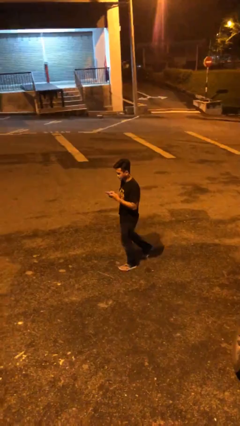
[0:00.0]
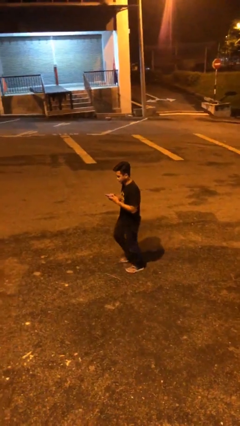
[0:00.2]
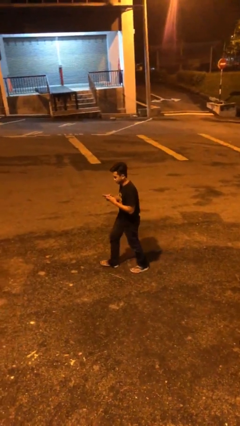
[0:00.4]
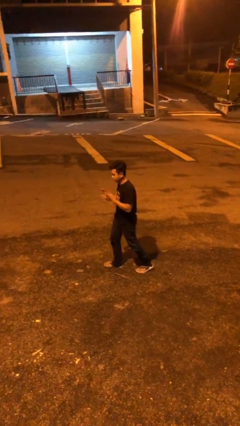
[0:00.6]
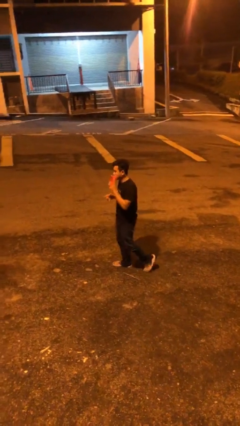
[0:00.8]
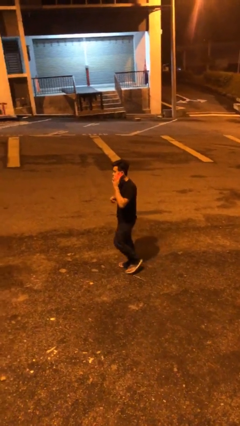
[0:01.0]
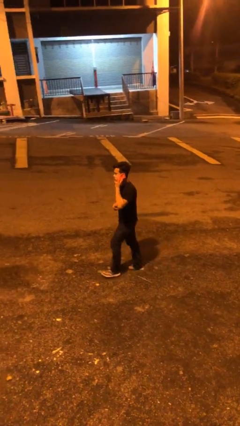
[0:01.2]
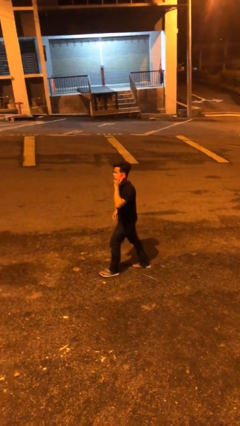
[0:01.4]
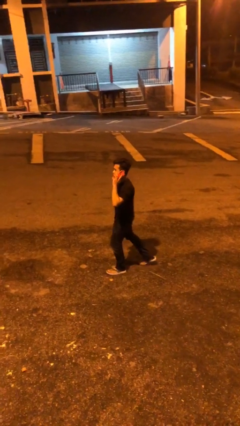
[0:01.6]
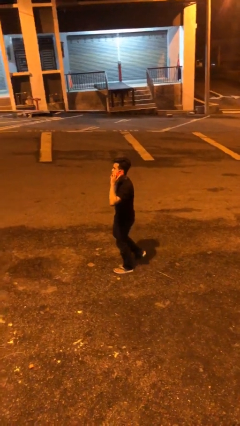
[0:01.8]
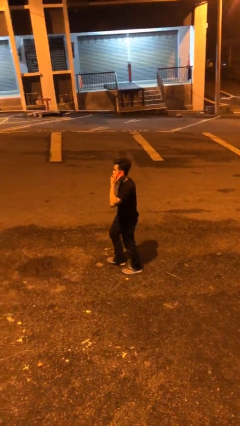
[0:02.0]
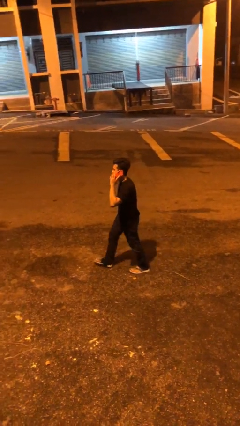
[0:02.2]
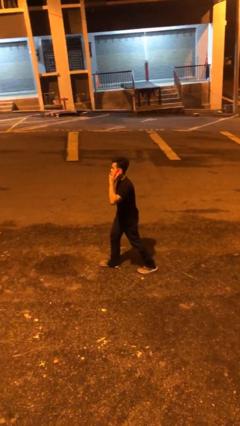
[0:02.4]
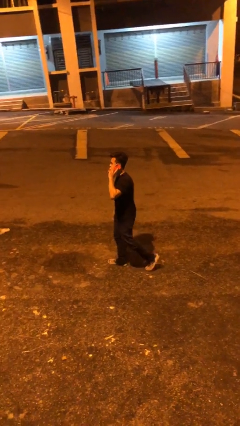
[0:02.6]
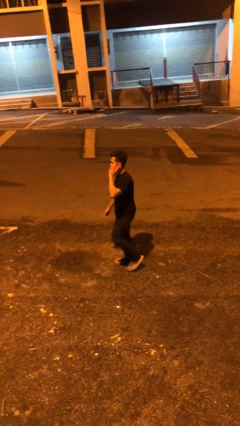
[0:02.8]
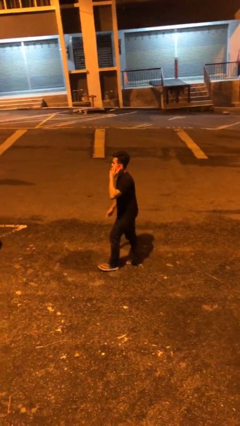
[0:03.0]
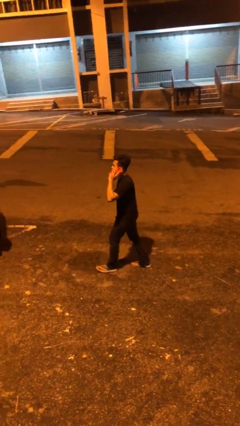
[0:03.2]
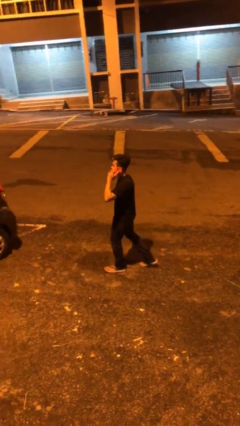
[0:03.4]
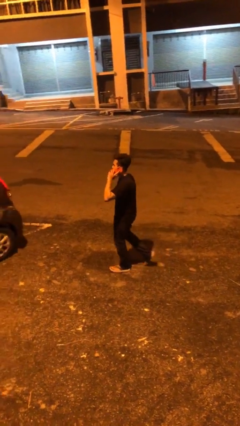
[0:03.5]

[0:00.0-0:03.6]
person talks on phone

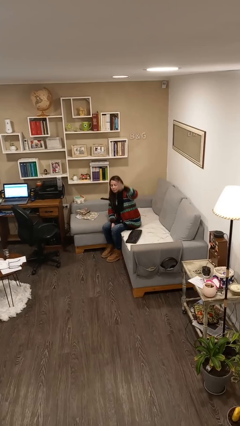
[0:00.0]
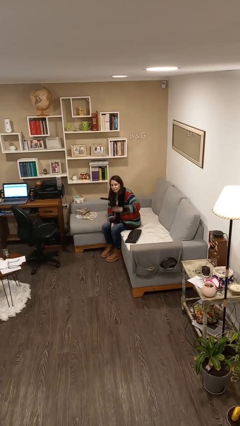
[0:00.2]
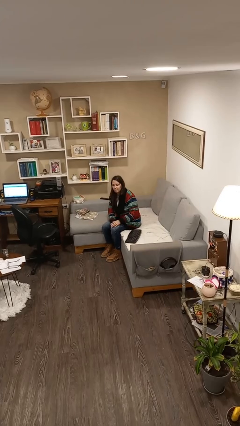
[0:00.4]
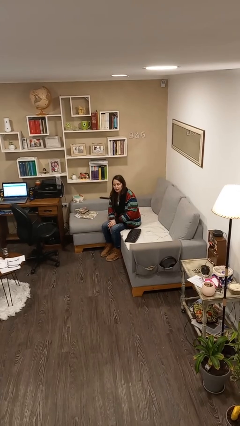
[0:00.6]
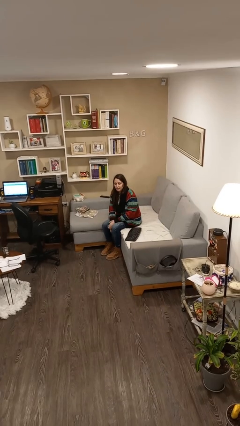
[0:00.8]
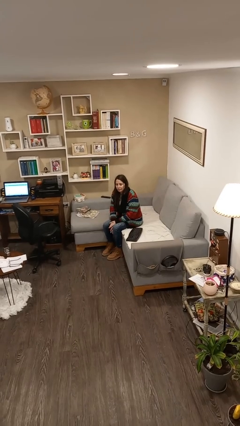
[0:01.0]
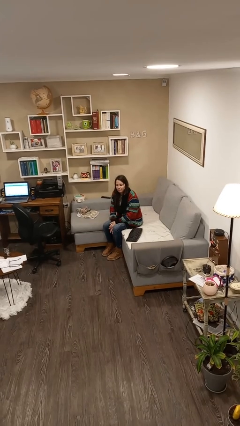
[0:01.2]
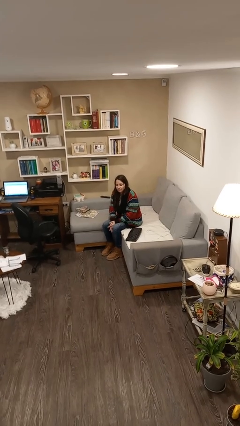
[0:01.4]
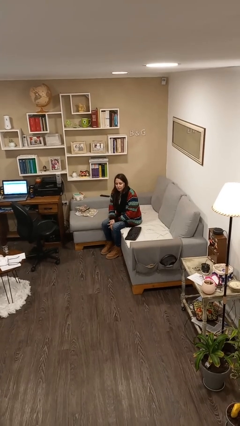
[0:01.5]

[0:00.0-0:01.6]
person gestures lower hand

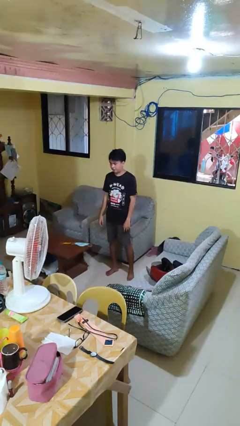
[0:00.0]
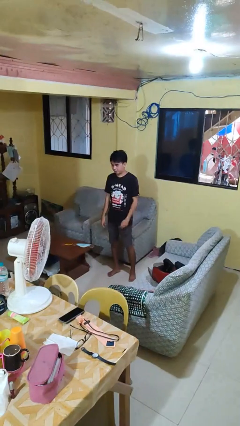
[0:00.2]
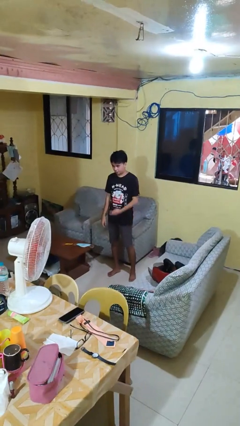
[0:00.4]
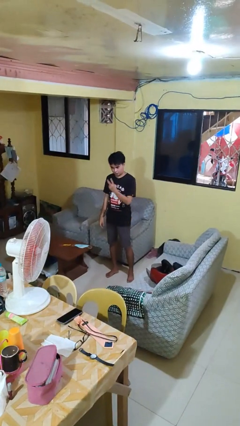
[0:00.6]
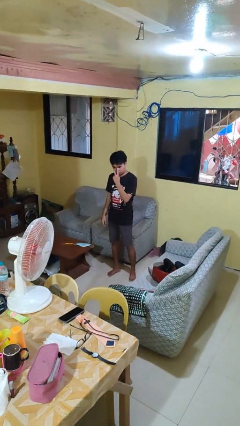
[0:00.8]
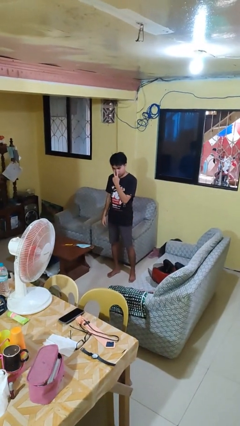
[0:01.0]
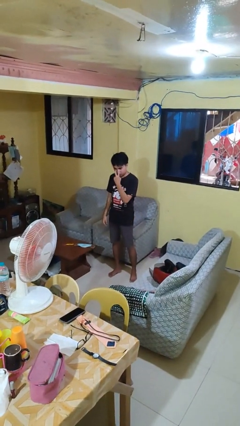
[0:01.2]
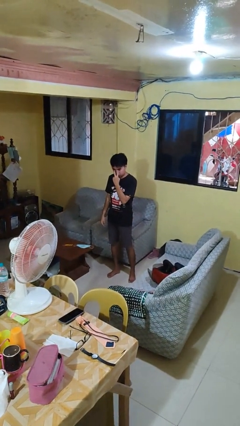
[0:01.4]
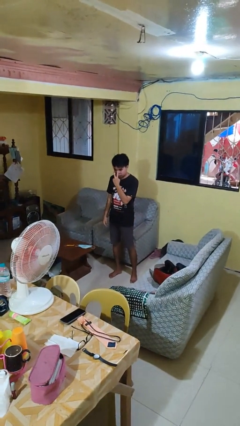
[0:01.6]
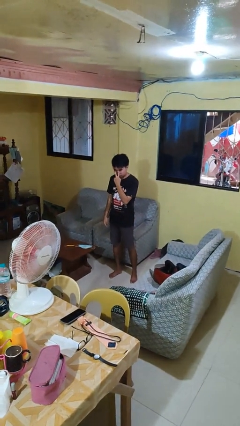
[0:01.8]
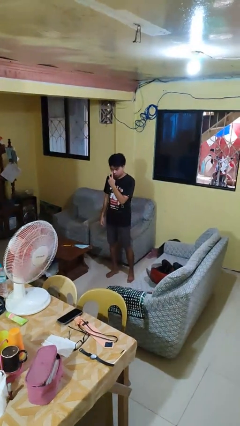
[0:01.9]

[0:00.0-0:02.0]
person gestures watch closely

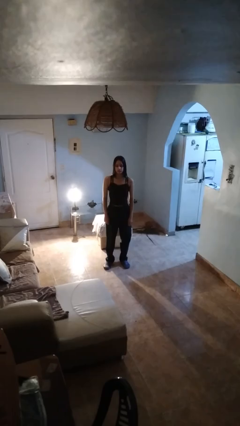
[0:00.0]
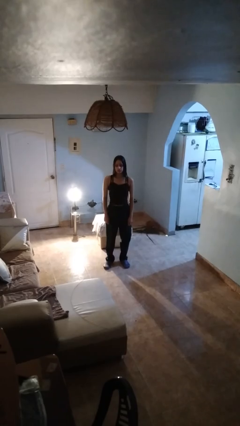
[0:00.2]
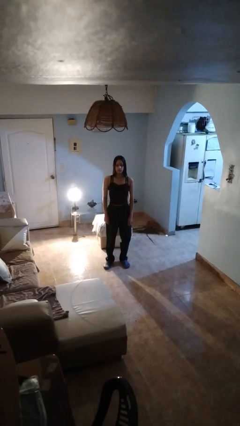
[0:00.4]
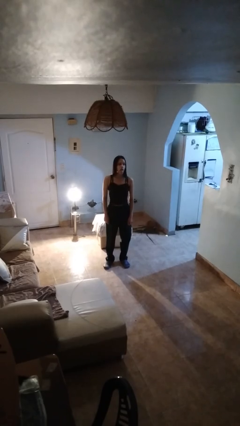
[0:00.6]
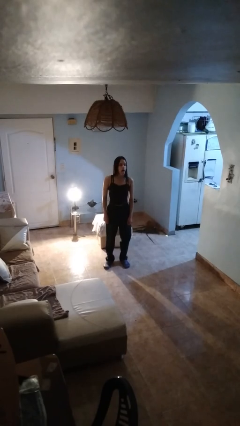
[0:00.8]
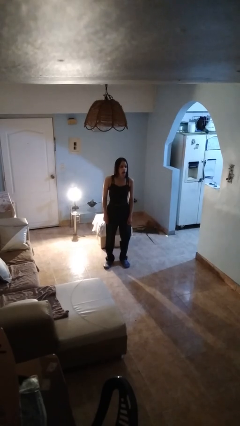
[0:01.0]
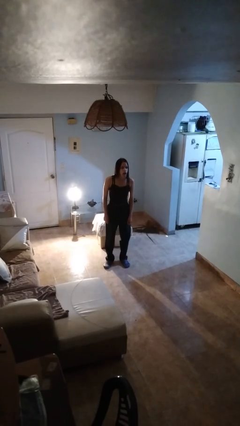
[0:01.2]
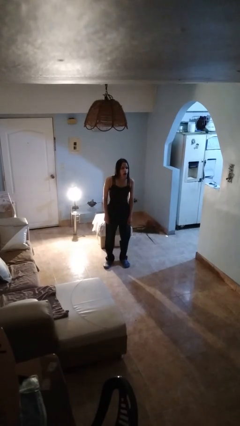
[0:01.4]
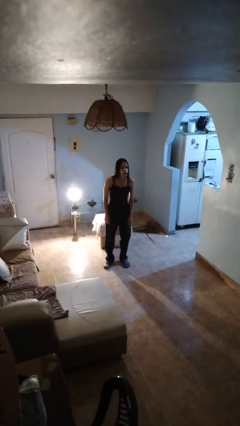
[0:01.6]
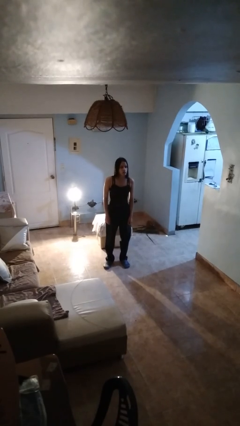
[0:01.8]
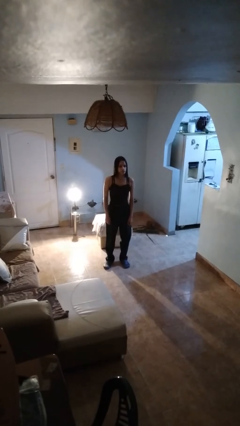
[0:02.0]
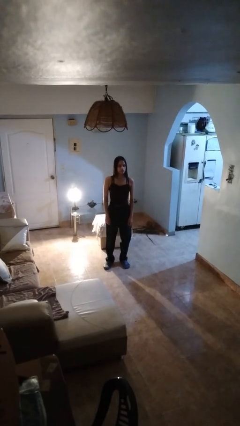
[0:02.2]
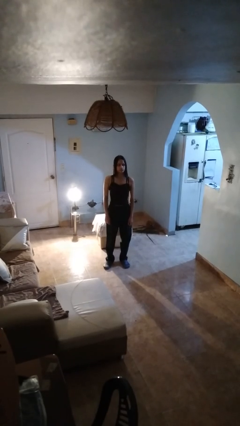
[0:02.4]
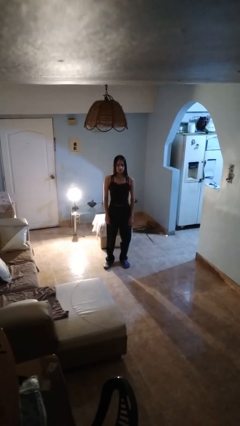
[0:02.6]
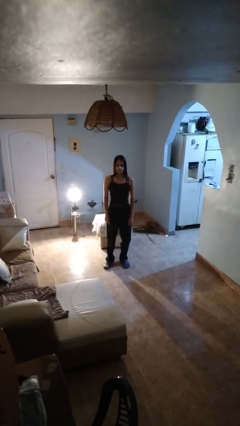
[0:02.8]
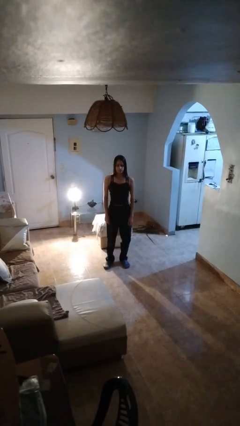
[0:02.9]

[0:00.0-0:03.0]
person sticks out tongue

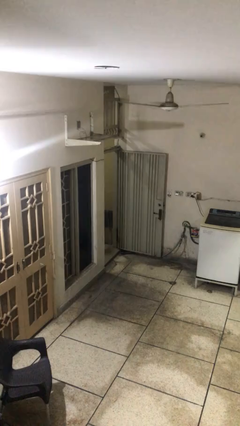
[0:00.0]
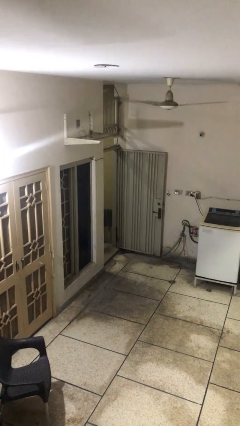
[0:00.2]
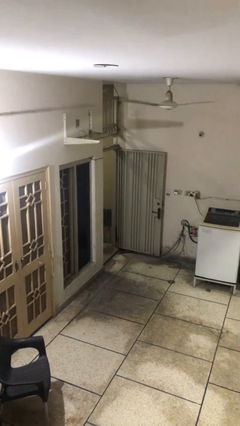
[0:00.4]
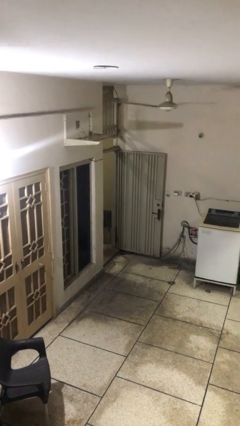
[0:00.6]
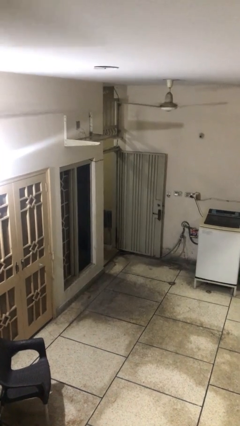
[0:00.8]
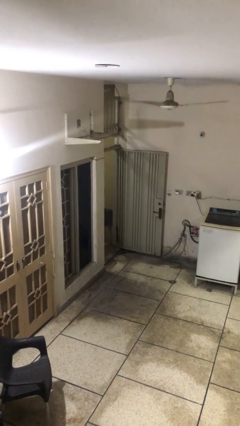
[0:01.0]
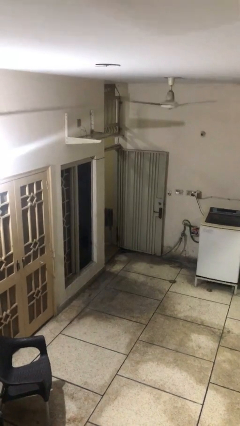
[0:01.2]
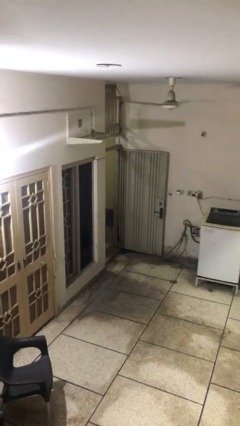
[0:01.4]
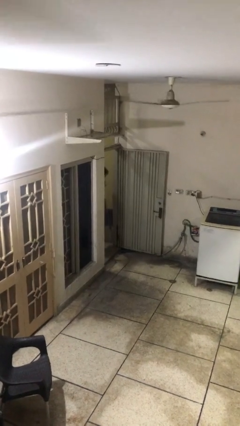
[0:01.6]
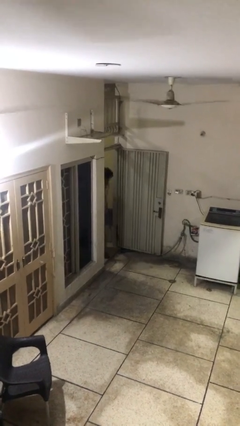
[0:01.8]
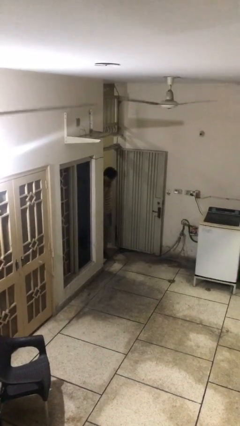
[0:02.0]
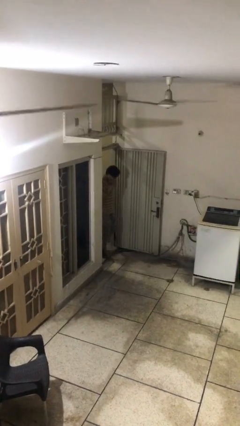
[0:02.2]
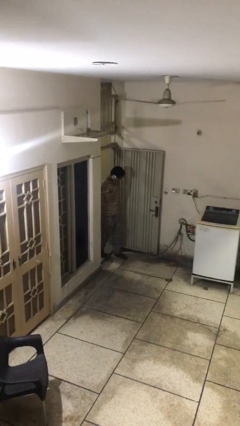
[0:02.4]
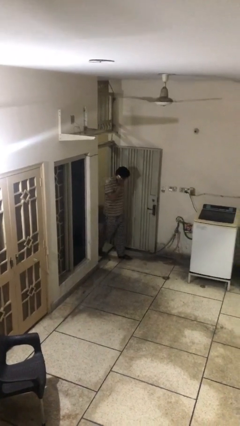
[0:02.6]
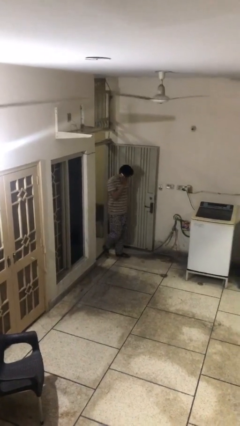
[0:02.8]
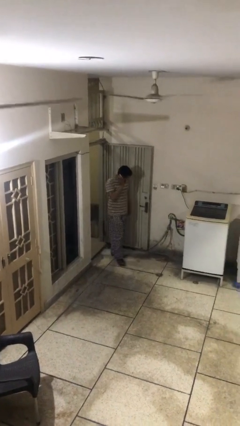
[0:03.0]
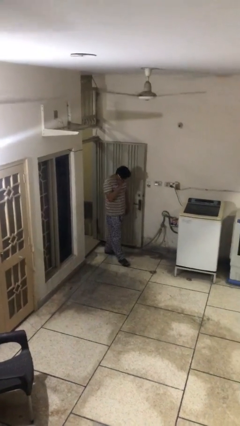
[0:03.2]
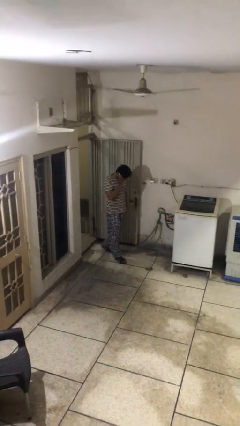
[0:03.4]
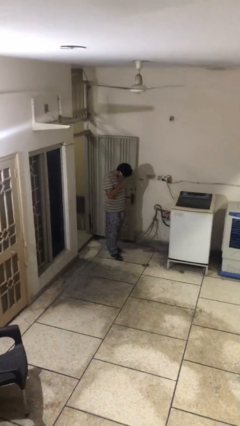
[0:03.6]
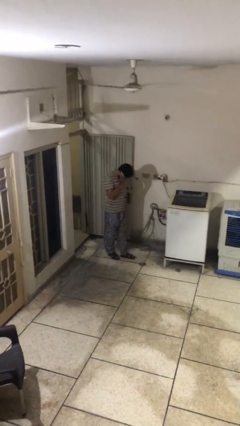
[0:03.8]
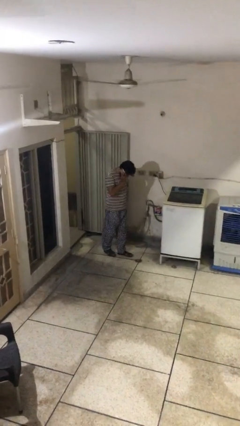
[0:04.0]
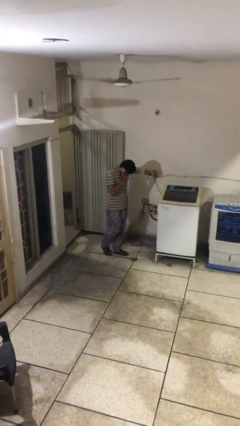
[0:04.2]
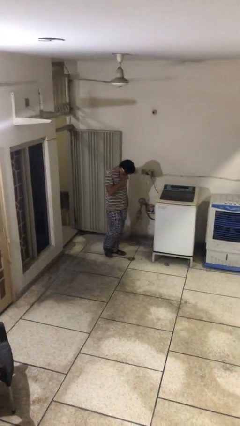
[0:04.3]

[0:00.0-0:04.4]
person enters scene through structure

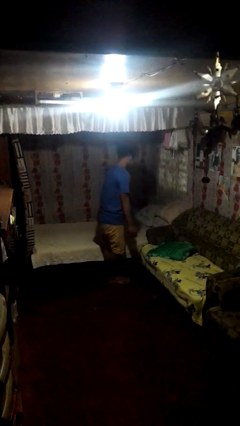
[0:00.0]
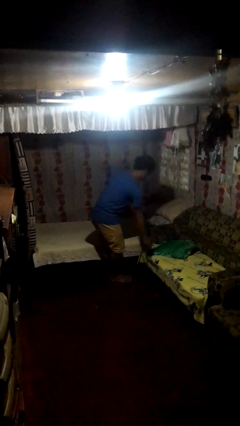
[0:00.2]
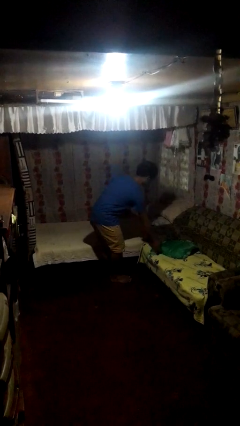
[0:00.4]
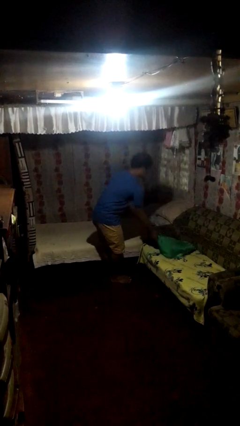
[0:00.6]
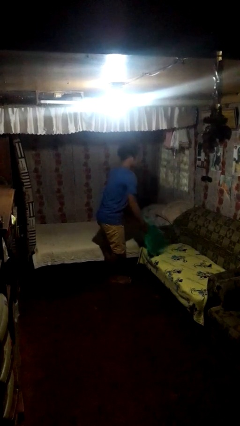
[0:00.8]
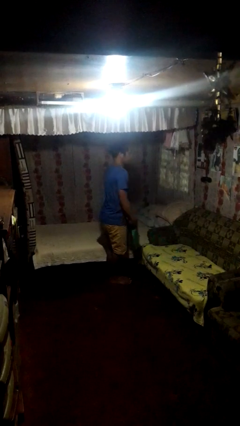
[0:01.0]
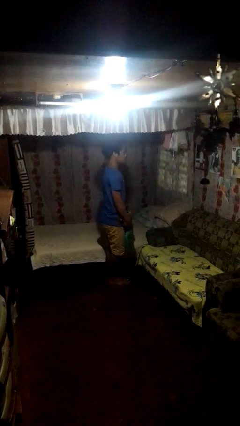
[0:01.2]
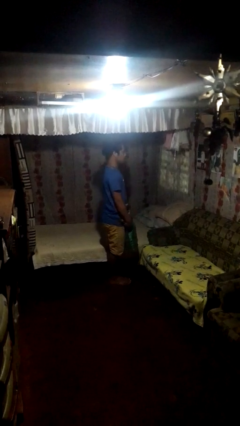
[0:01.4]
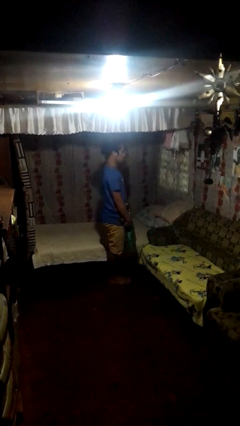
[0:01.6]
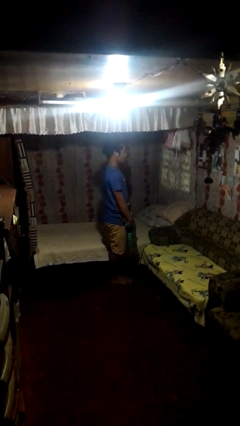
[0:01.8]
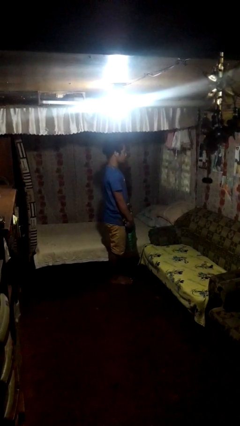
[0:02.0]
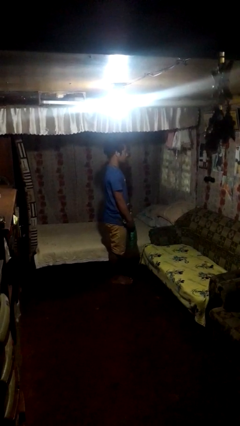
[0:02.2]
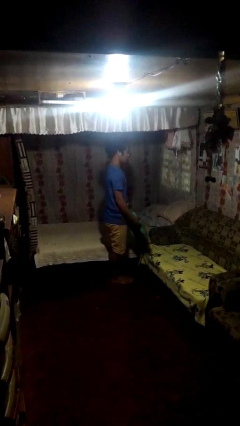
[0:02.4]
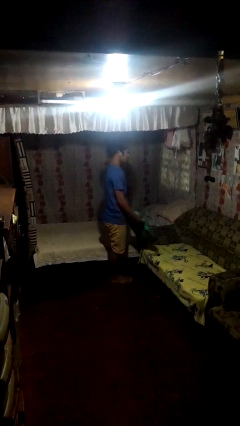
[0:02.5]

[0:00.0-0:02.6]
person picks up object from couch
